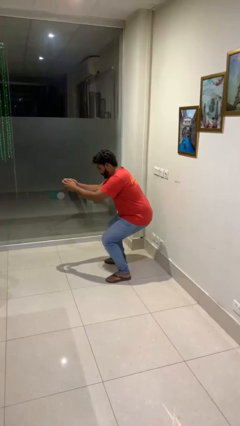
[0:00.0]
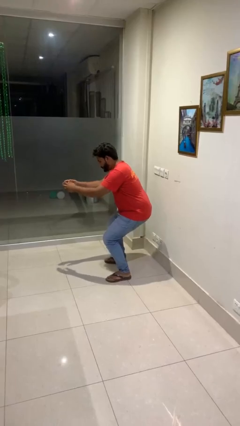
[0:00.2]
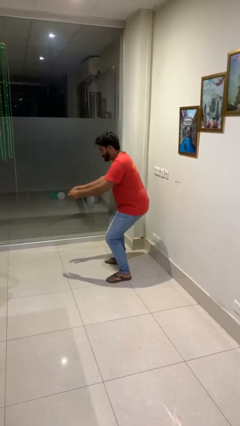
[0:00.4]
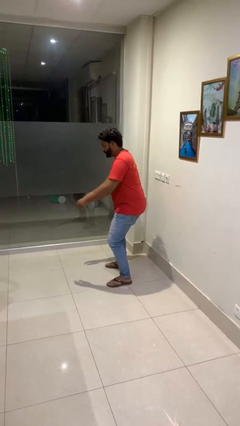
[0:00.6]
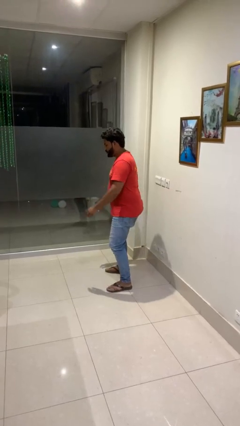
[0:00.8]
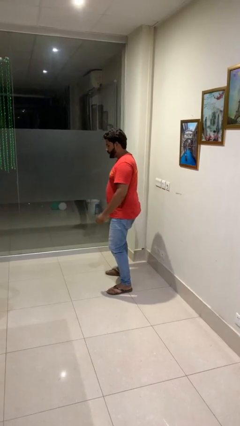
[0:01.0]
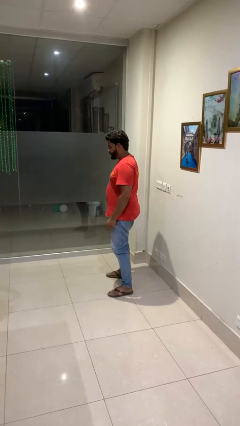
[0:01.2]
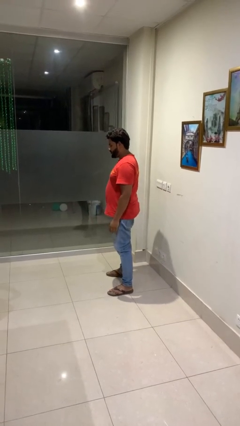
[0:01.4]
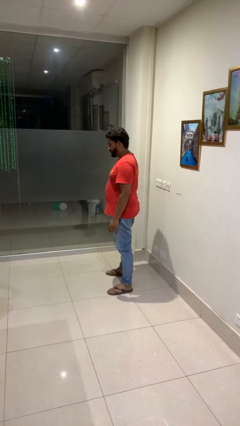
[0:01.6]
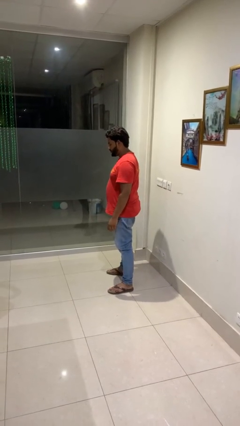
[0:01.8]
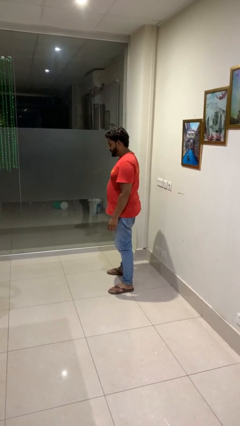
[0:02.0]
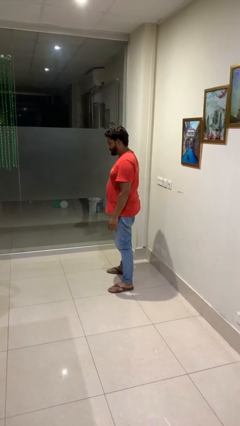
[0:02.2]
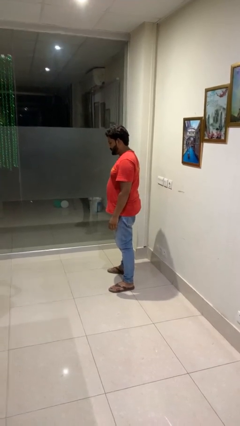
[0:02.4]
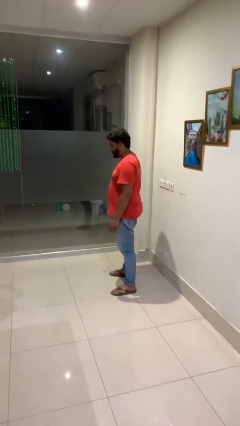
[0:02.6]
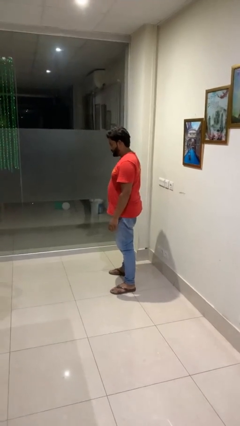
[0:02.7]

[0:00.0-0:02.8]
person stands up

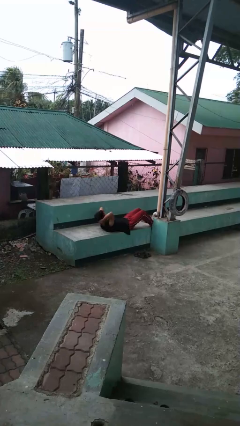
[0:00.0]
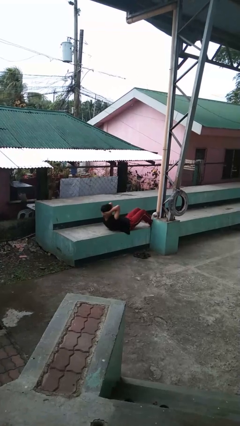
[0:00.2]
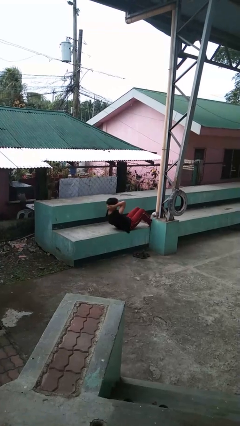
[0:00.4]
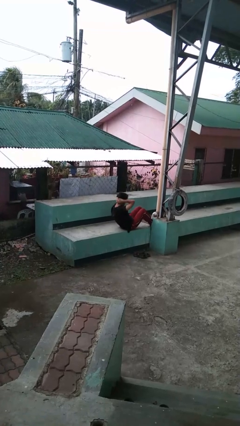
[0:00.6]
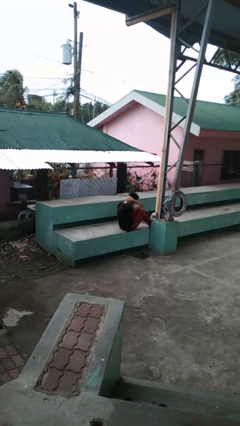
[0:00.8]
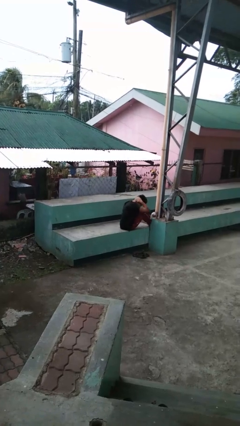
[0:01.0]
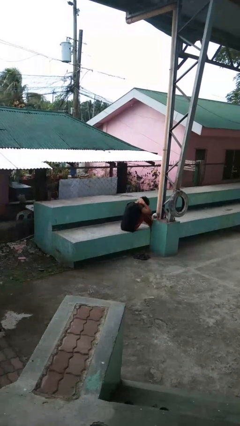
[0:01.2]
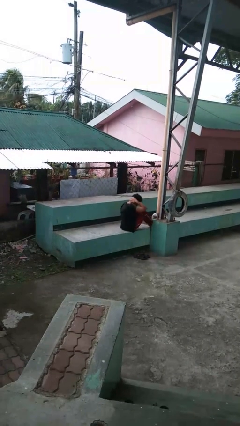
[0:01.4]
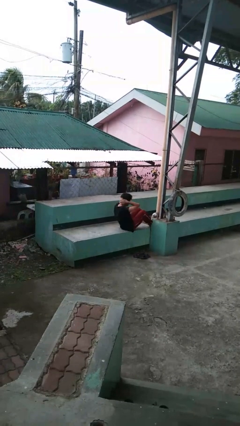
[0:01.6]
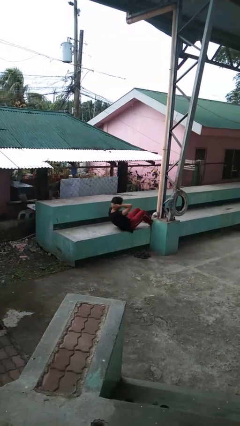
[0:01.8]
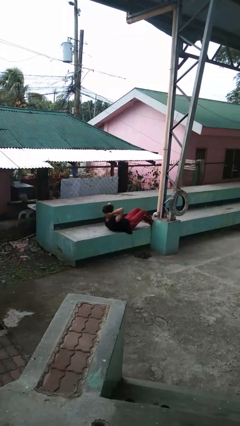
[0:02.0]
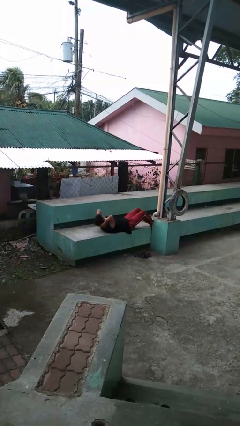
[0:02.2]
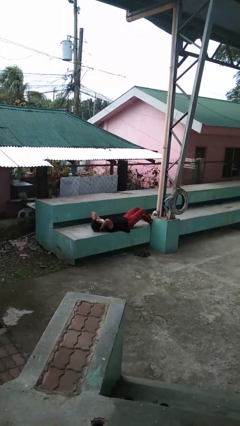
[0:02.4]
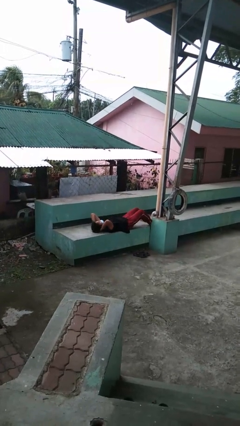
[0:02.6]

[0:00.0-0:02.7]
person exercises with situp

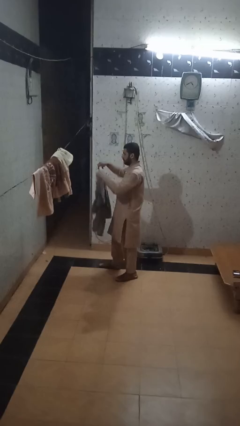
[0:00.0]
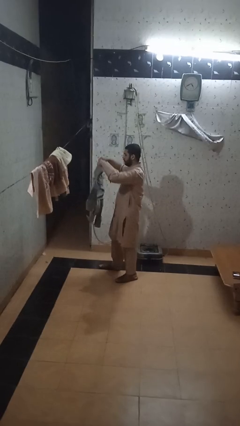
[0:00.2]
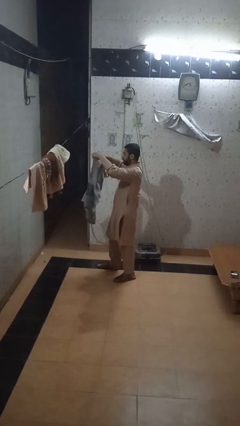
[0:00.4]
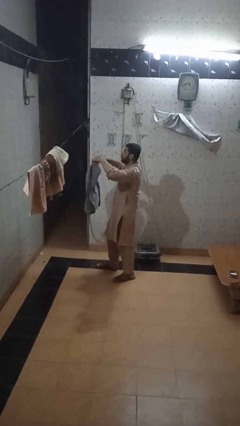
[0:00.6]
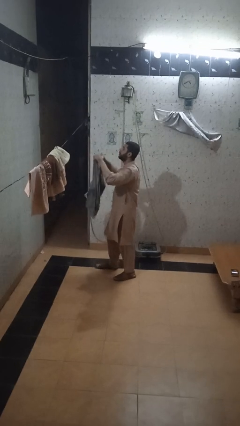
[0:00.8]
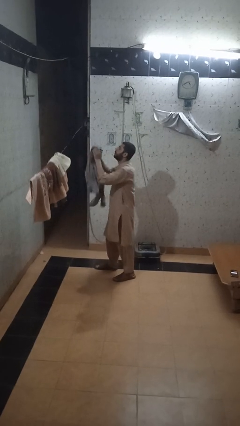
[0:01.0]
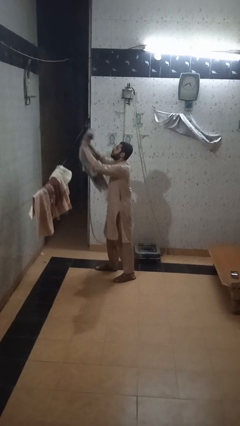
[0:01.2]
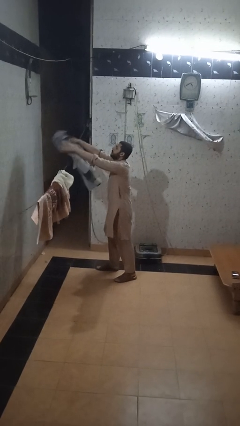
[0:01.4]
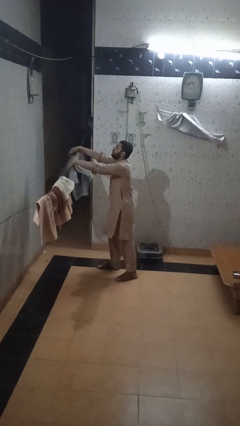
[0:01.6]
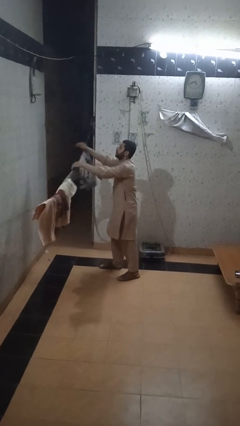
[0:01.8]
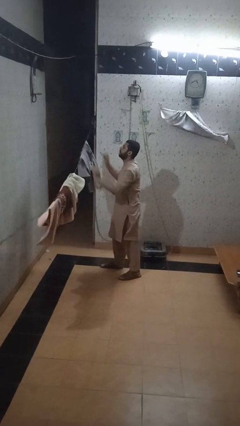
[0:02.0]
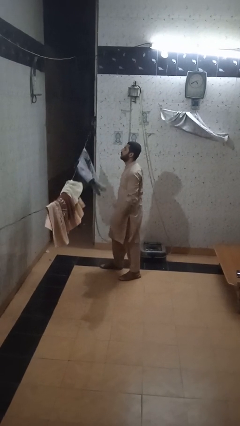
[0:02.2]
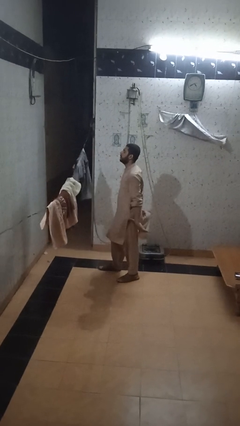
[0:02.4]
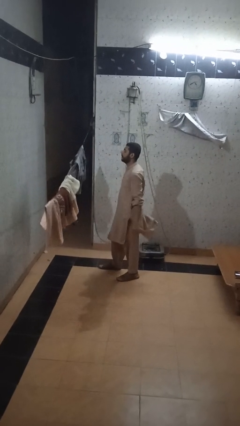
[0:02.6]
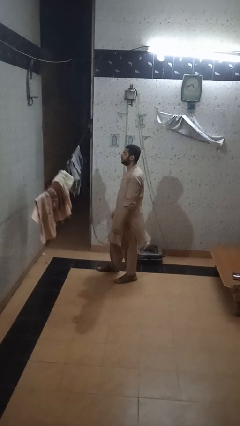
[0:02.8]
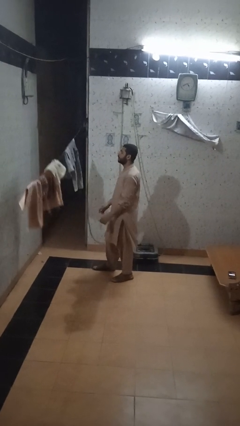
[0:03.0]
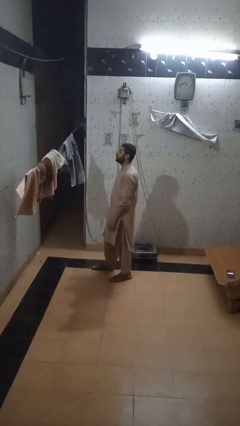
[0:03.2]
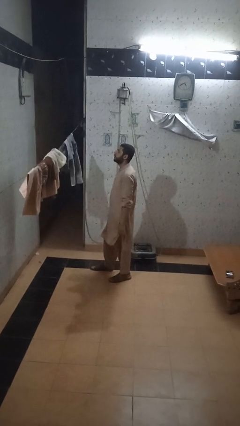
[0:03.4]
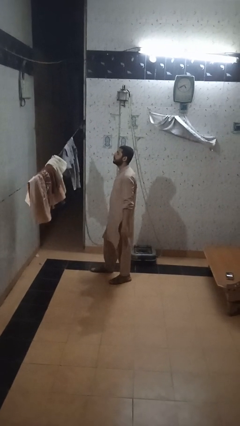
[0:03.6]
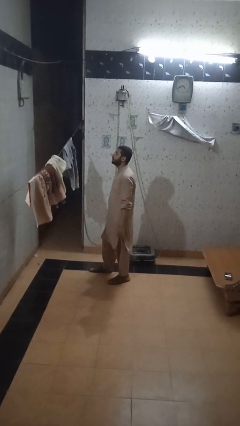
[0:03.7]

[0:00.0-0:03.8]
person puts clothes into closet

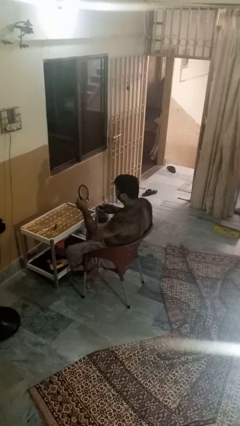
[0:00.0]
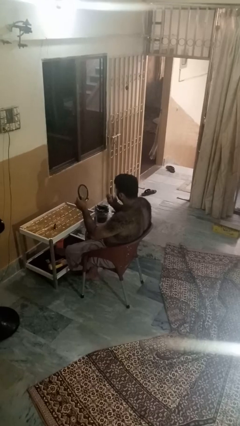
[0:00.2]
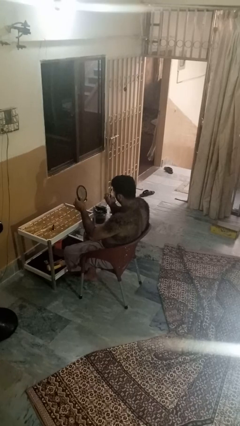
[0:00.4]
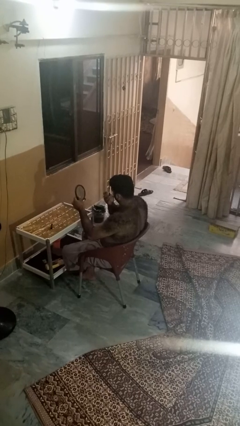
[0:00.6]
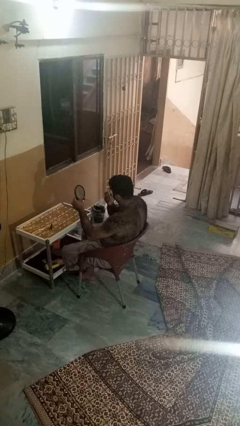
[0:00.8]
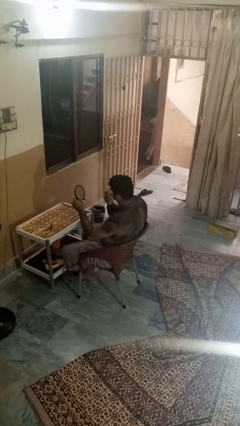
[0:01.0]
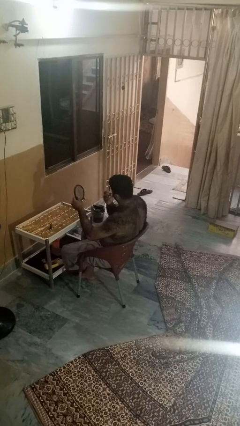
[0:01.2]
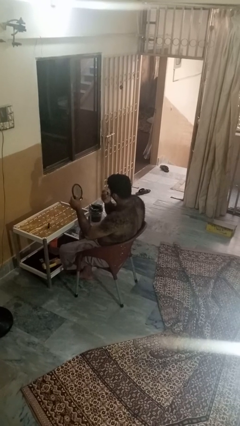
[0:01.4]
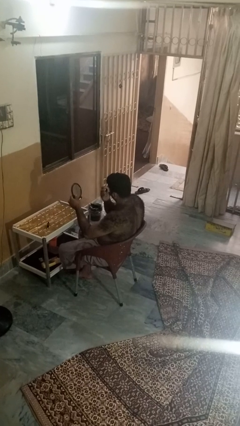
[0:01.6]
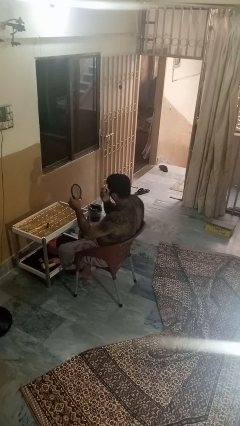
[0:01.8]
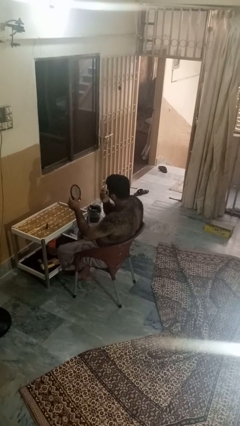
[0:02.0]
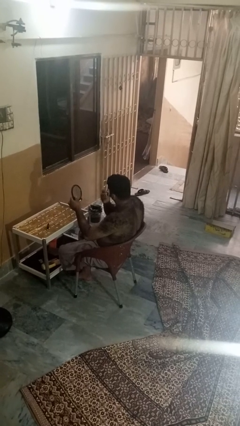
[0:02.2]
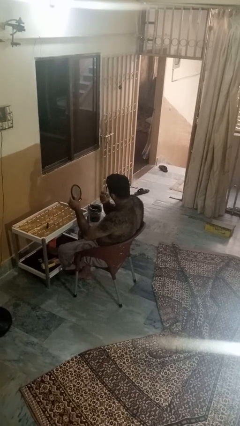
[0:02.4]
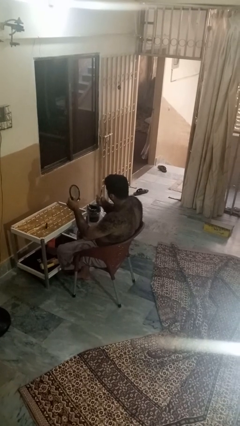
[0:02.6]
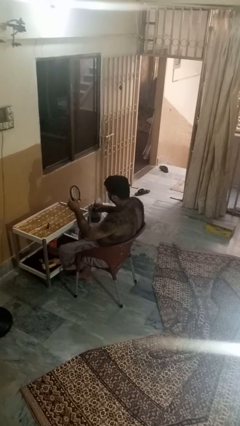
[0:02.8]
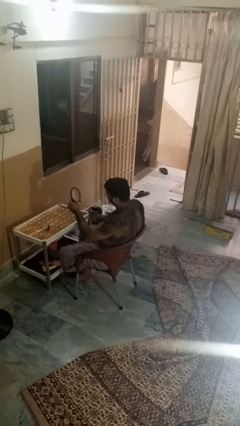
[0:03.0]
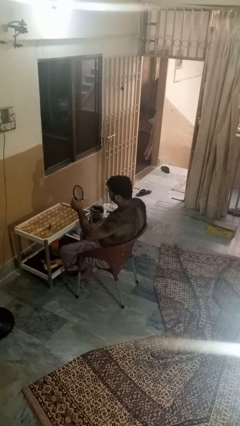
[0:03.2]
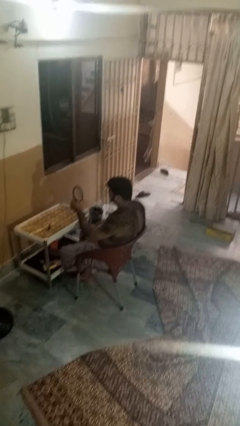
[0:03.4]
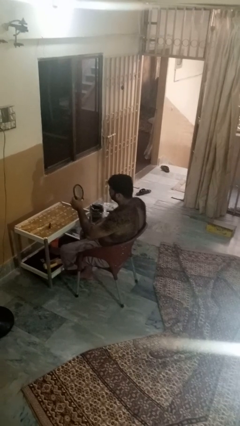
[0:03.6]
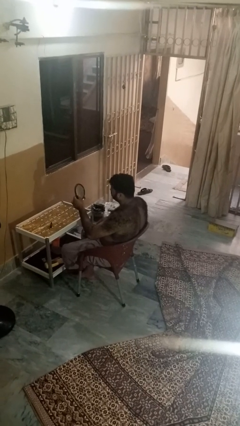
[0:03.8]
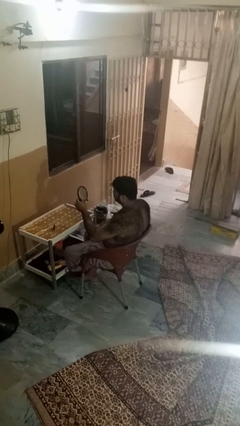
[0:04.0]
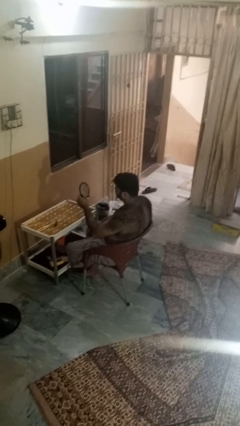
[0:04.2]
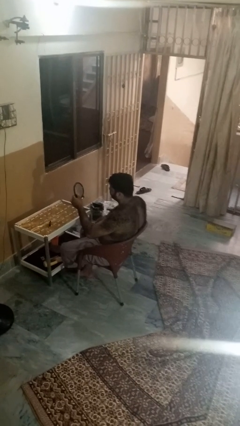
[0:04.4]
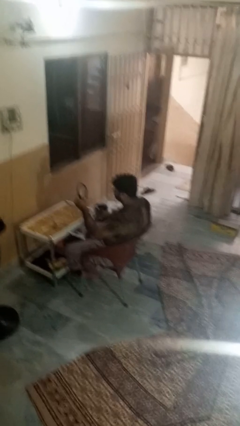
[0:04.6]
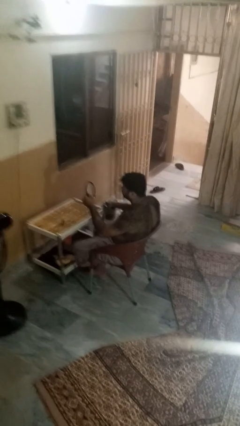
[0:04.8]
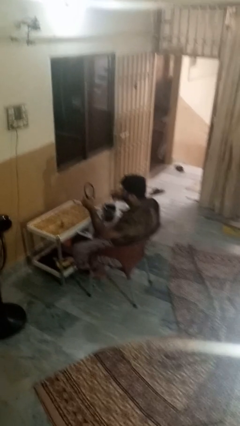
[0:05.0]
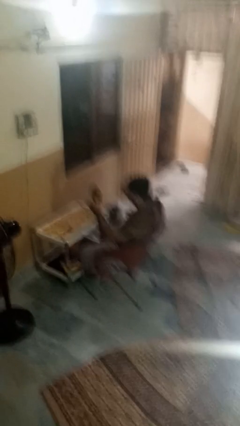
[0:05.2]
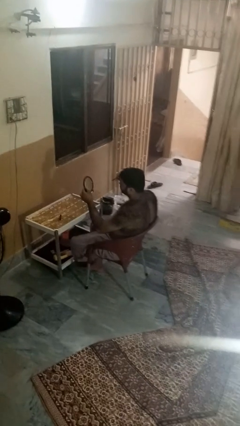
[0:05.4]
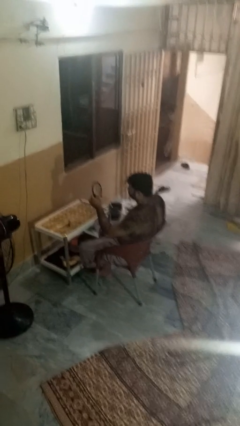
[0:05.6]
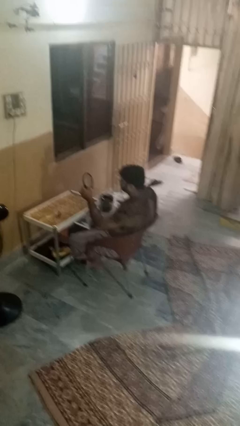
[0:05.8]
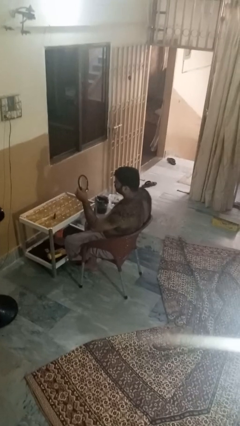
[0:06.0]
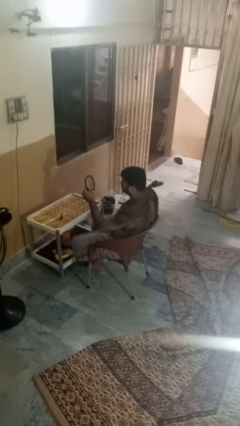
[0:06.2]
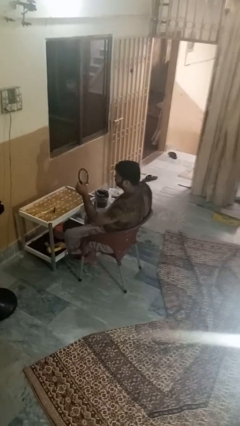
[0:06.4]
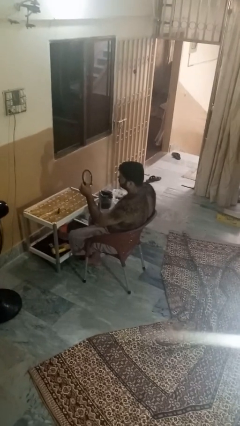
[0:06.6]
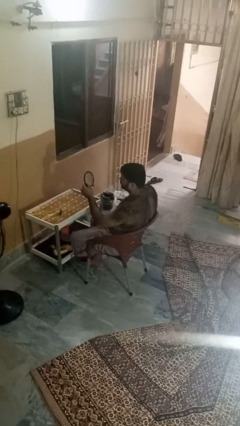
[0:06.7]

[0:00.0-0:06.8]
person applies eye makeup

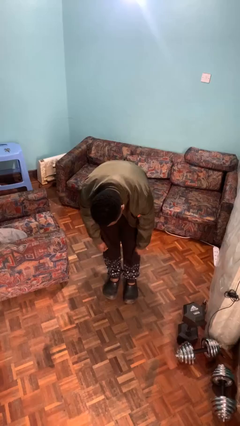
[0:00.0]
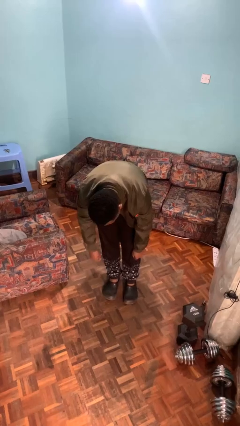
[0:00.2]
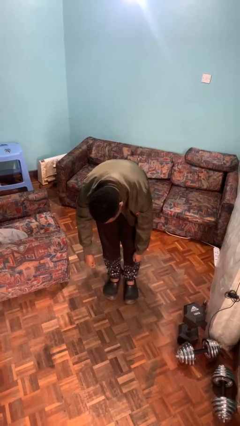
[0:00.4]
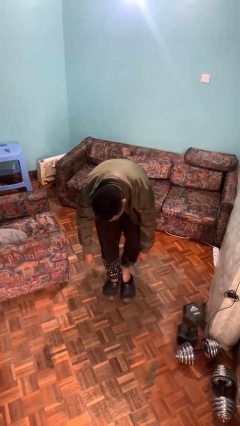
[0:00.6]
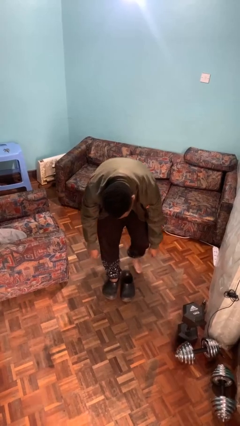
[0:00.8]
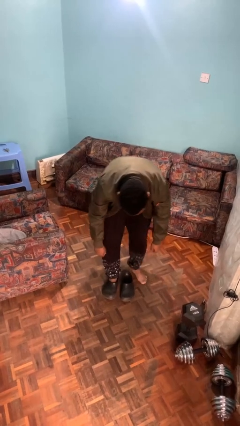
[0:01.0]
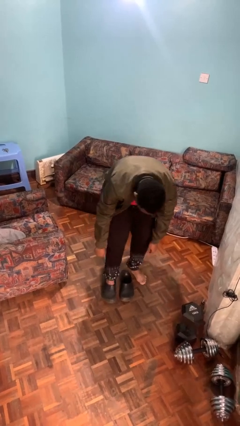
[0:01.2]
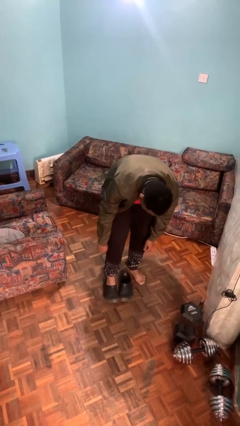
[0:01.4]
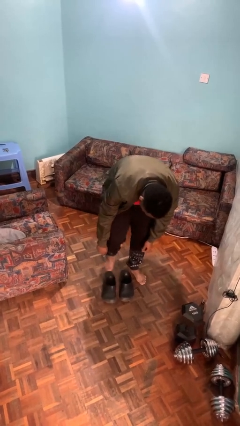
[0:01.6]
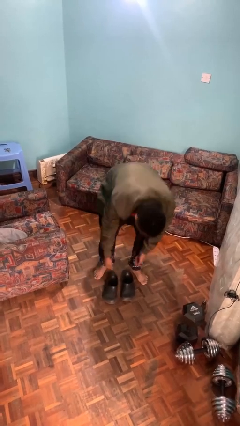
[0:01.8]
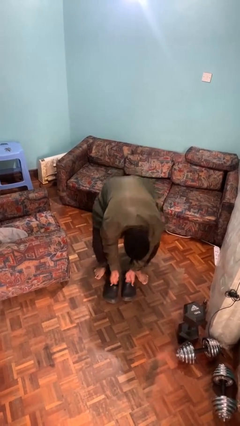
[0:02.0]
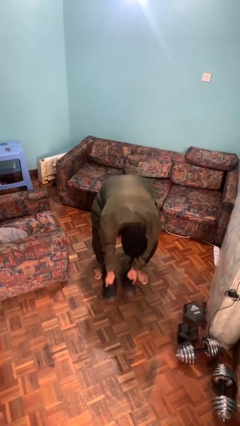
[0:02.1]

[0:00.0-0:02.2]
person takes off shoes
